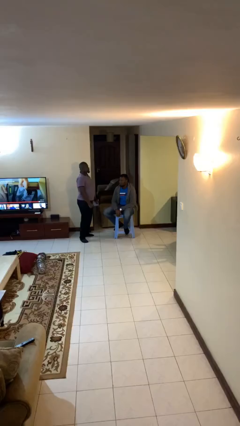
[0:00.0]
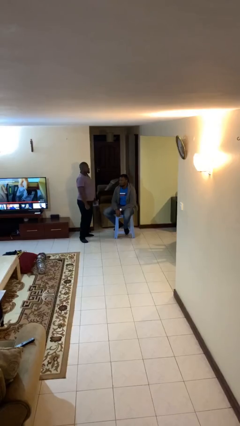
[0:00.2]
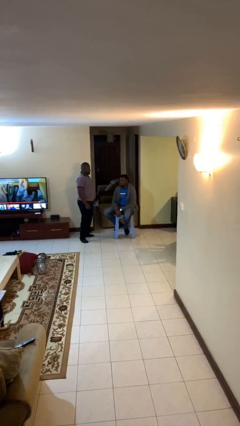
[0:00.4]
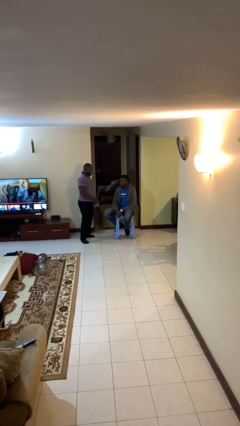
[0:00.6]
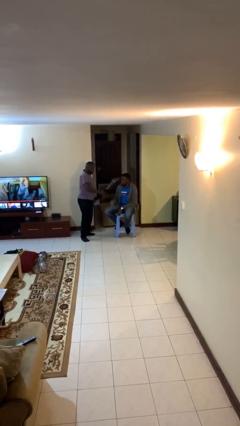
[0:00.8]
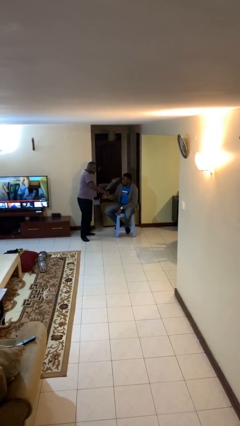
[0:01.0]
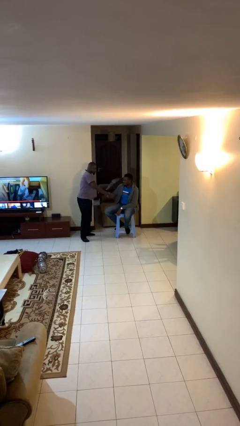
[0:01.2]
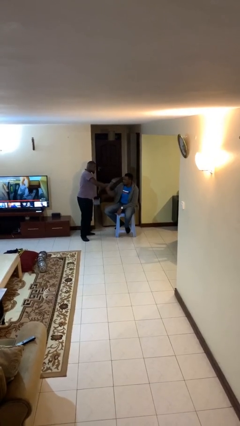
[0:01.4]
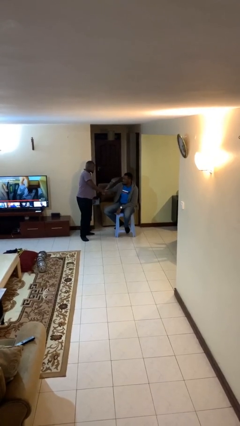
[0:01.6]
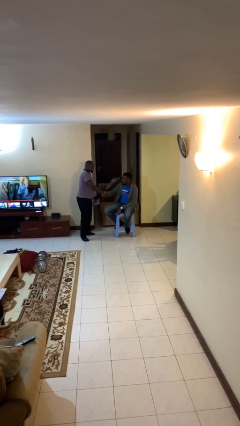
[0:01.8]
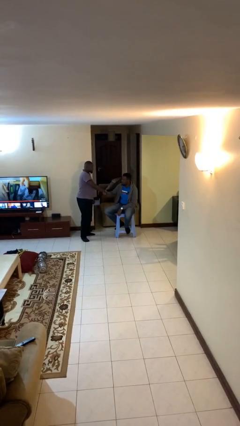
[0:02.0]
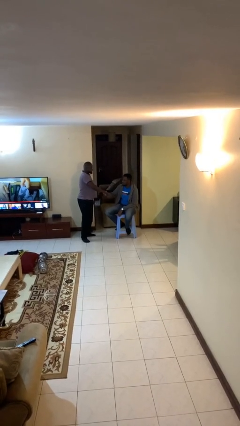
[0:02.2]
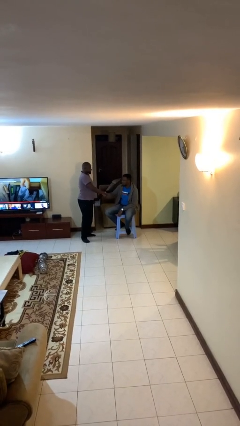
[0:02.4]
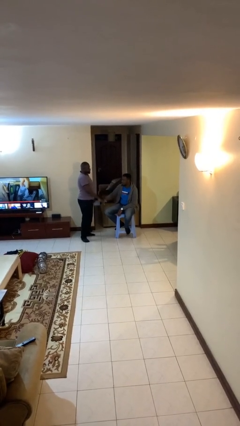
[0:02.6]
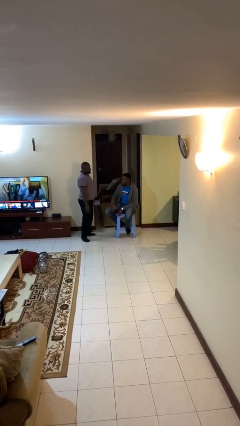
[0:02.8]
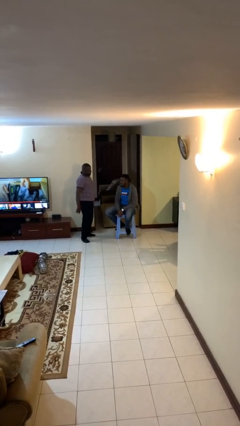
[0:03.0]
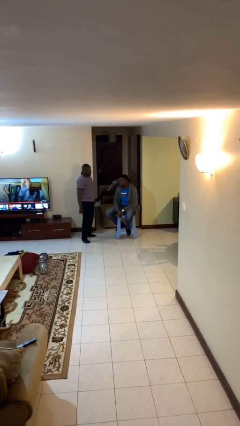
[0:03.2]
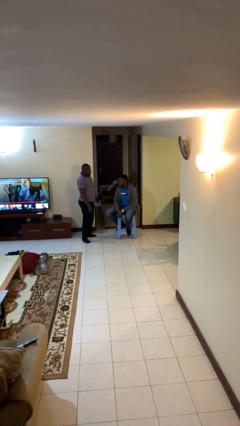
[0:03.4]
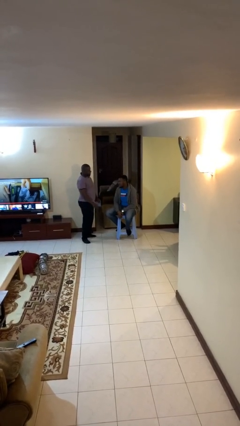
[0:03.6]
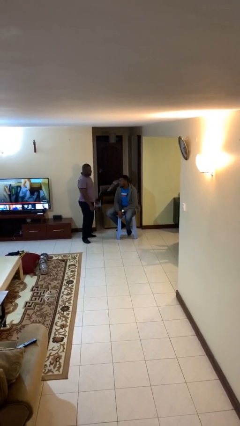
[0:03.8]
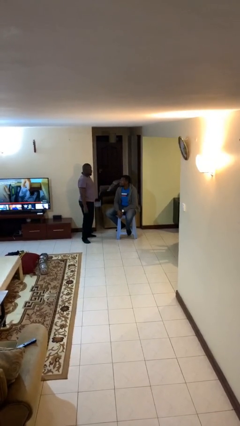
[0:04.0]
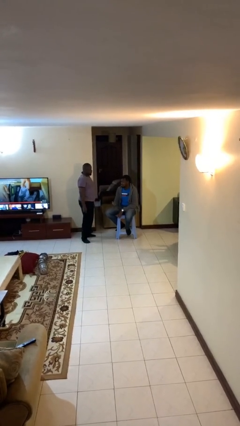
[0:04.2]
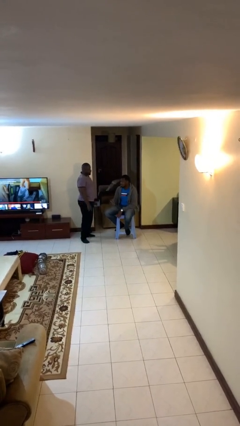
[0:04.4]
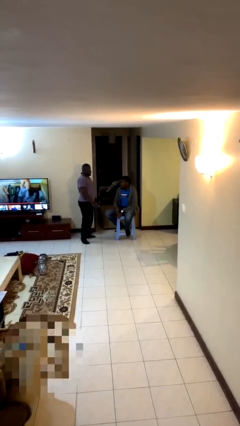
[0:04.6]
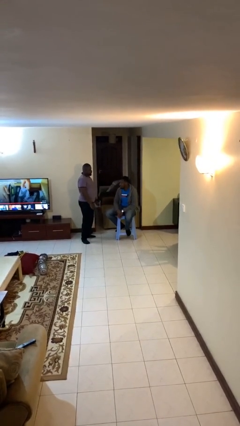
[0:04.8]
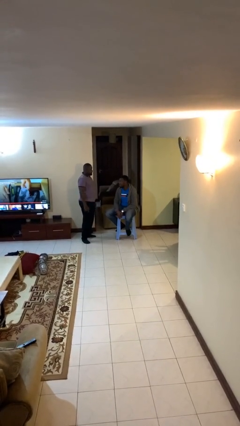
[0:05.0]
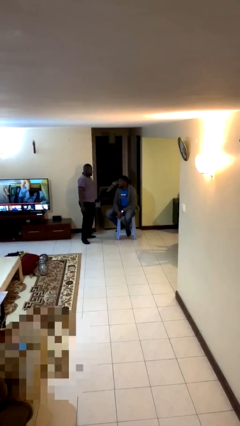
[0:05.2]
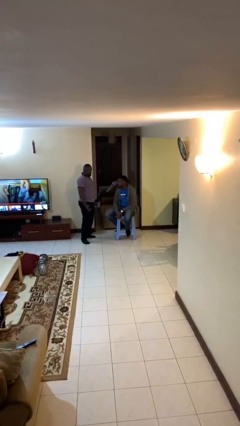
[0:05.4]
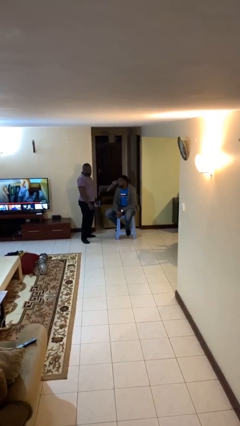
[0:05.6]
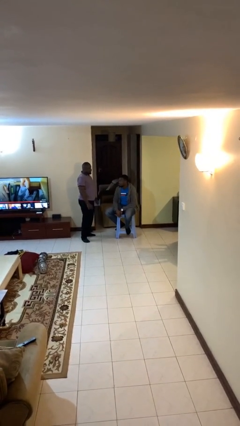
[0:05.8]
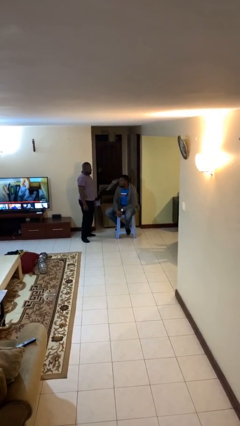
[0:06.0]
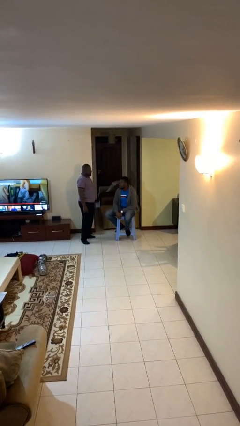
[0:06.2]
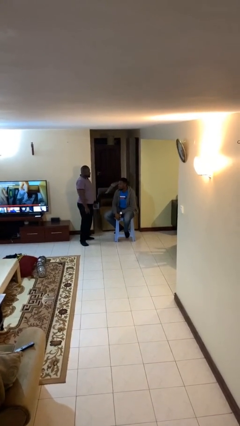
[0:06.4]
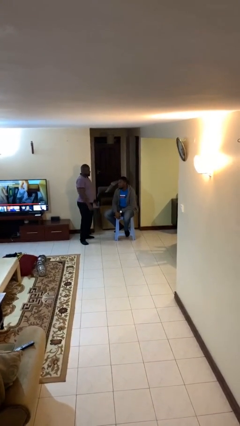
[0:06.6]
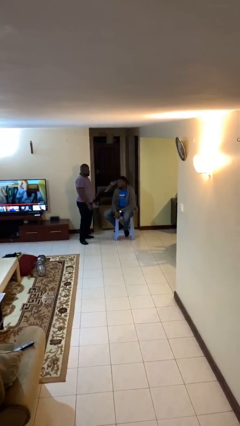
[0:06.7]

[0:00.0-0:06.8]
person shakes hand

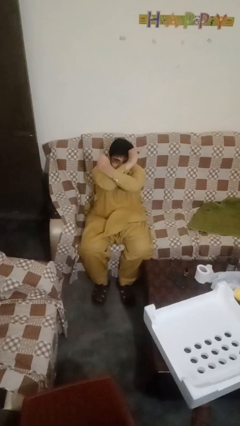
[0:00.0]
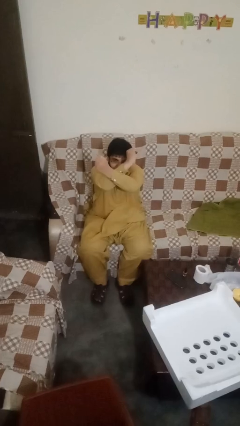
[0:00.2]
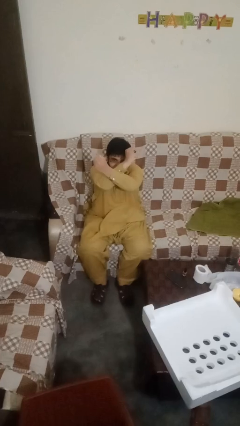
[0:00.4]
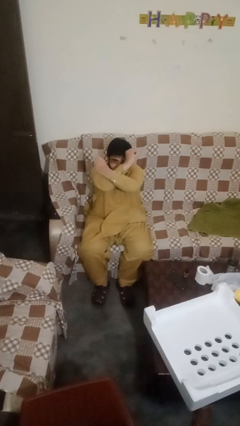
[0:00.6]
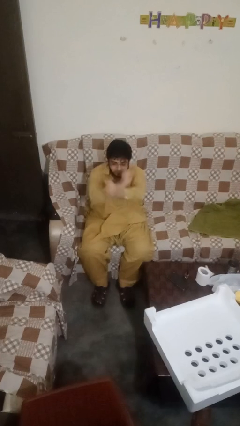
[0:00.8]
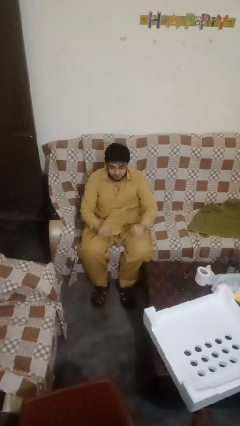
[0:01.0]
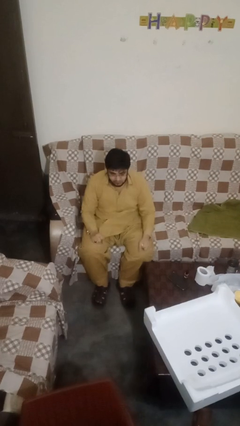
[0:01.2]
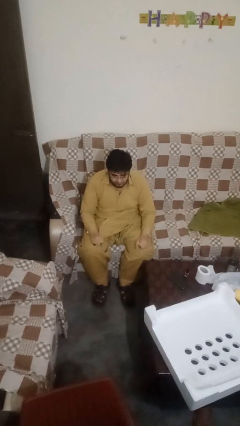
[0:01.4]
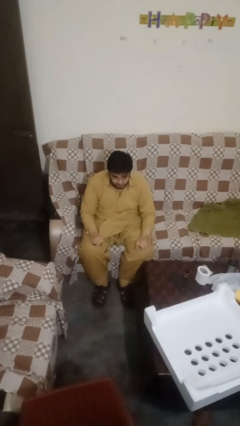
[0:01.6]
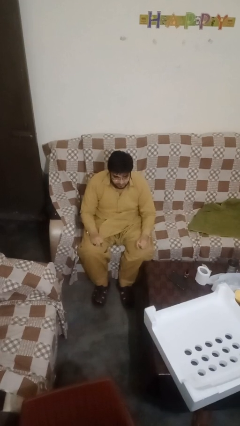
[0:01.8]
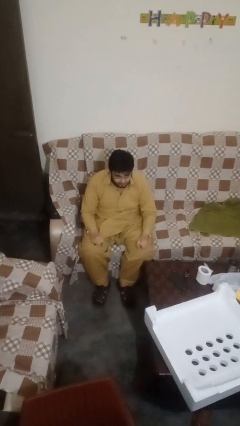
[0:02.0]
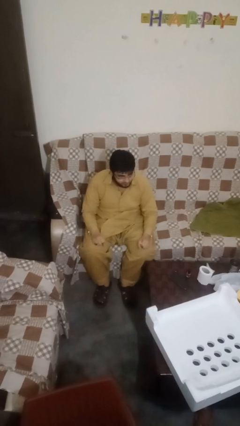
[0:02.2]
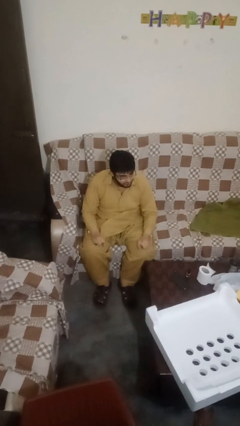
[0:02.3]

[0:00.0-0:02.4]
person gestures arms x

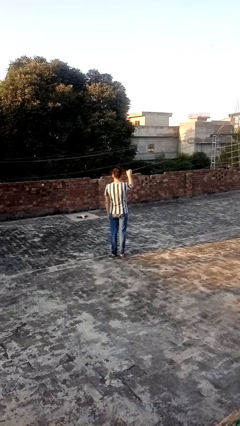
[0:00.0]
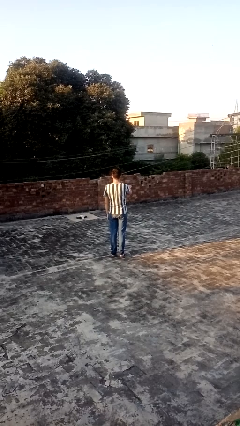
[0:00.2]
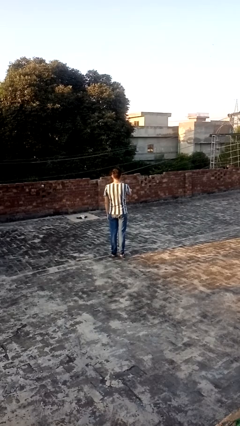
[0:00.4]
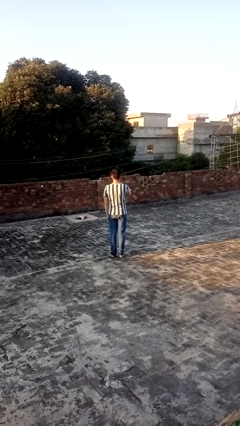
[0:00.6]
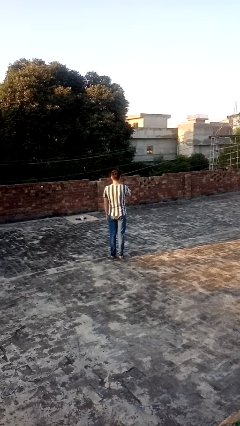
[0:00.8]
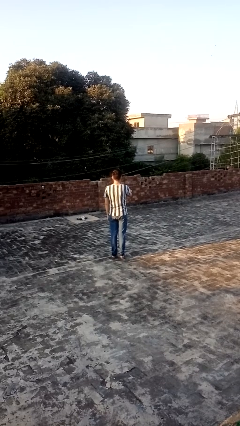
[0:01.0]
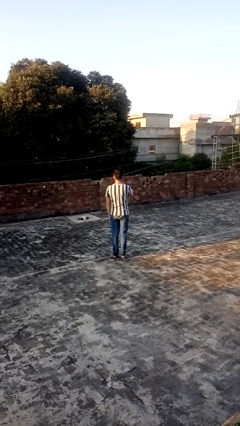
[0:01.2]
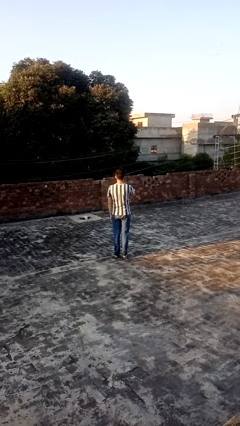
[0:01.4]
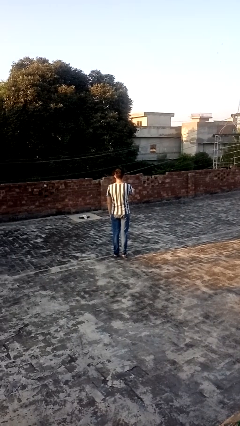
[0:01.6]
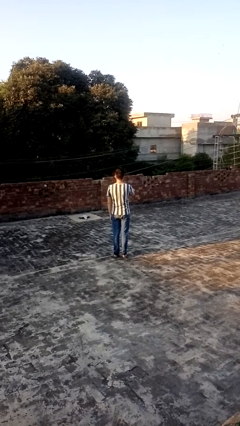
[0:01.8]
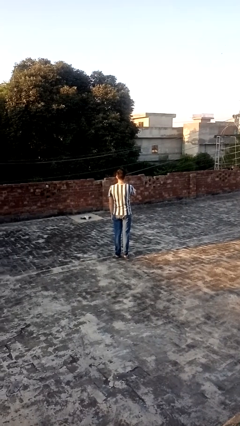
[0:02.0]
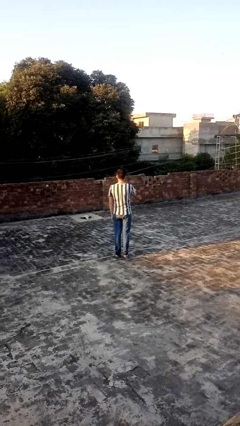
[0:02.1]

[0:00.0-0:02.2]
person gestures swipe down

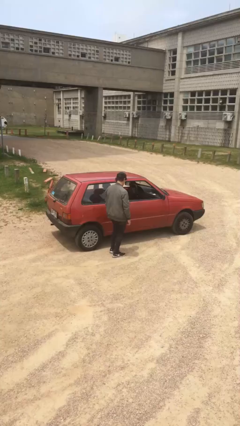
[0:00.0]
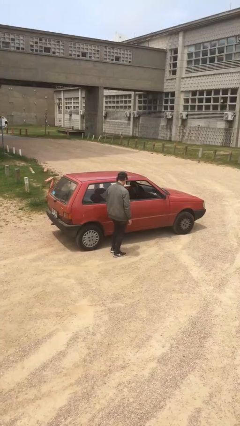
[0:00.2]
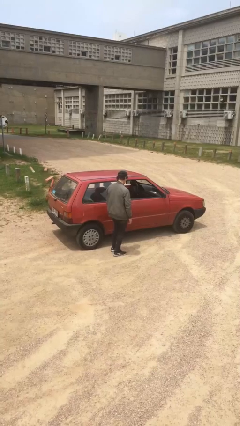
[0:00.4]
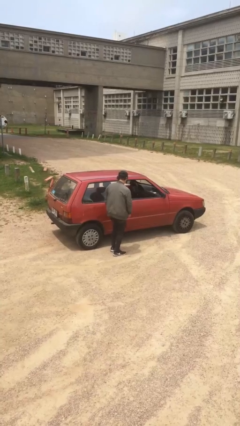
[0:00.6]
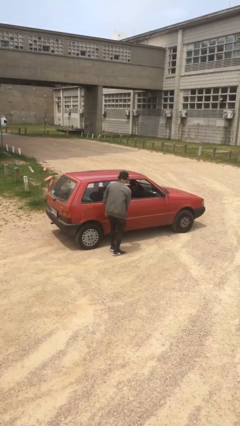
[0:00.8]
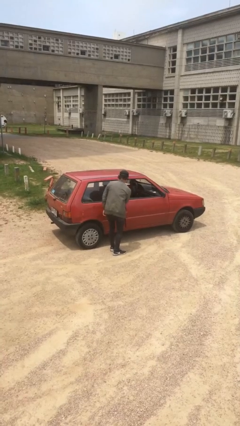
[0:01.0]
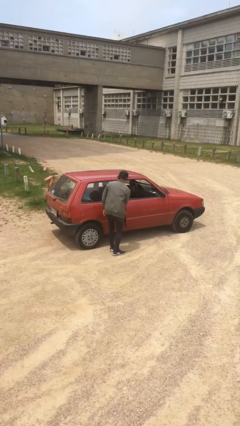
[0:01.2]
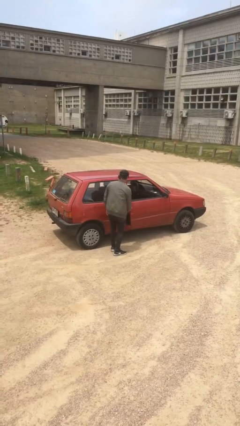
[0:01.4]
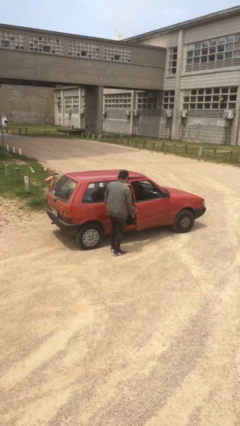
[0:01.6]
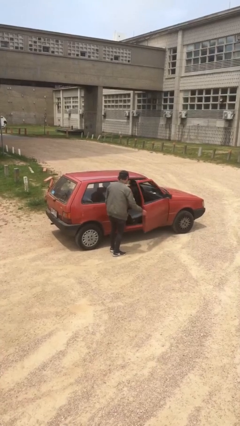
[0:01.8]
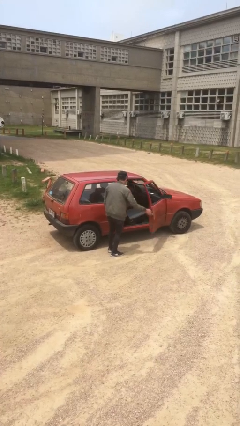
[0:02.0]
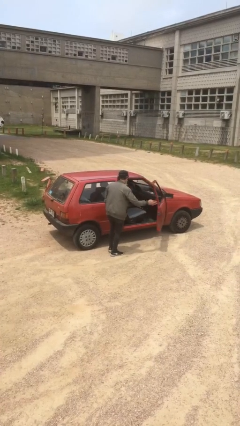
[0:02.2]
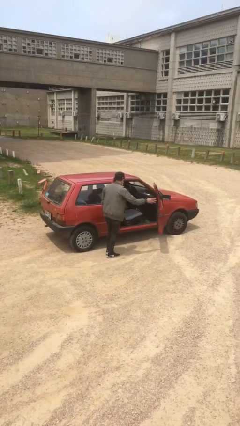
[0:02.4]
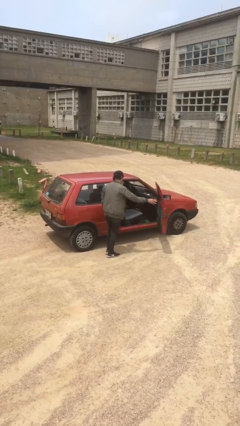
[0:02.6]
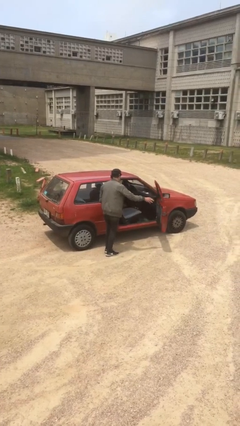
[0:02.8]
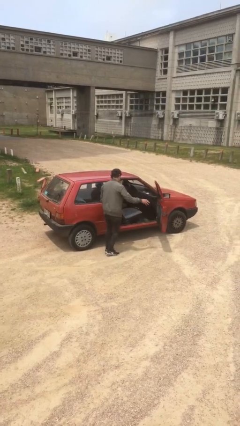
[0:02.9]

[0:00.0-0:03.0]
person opens car door

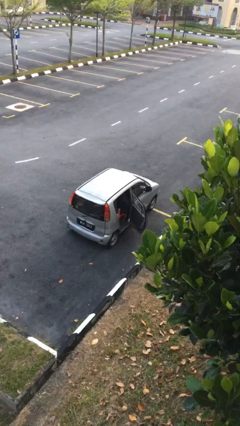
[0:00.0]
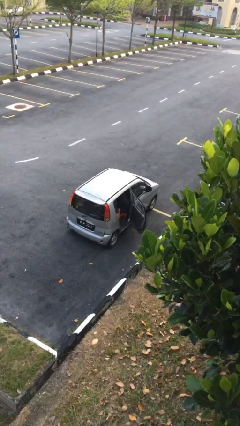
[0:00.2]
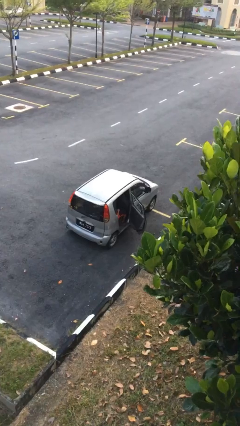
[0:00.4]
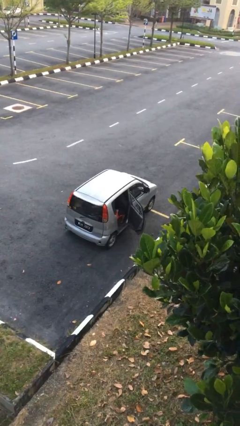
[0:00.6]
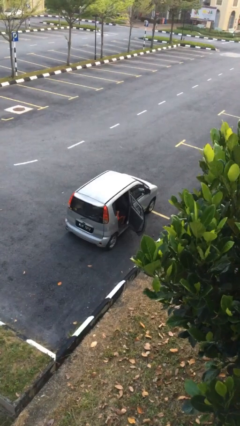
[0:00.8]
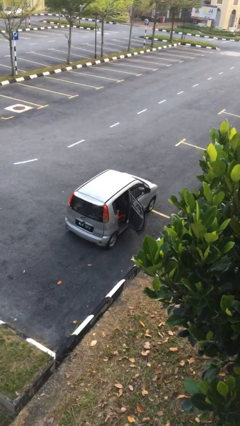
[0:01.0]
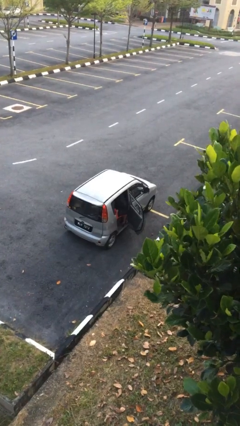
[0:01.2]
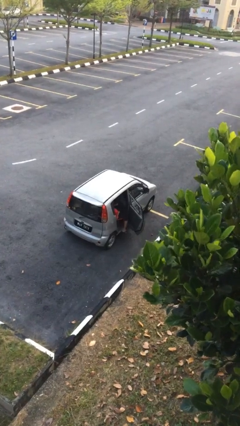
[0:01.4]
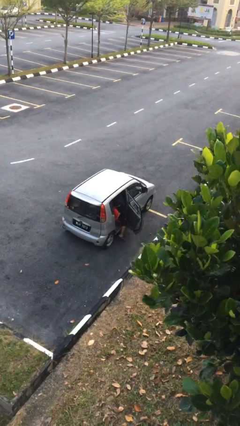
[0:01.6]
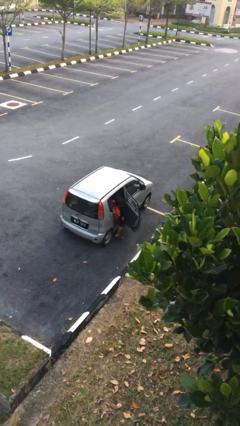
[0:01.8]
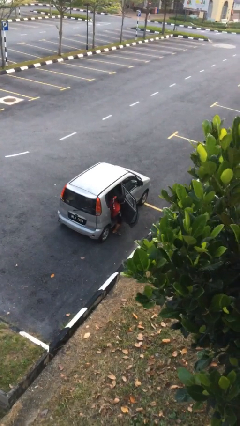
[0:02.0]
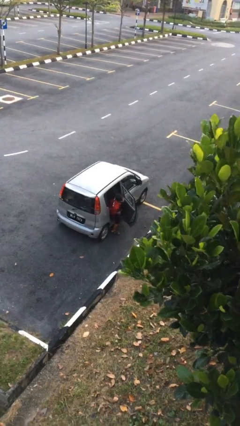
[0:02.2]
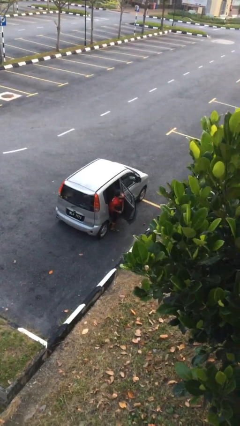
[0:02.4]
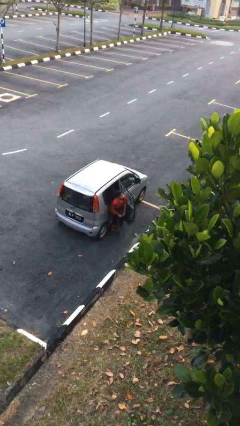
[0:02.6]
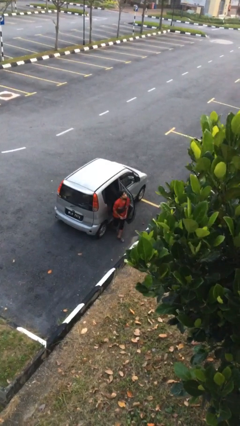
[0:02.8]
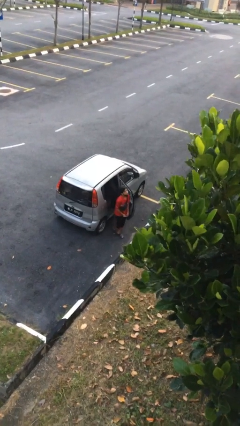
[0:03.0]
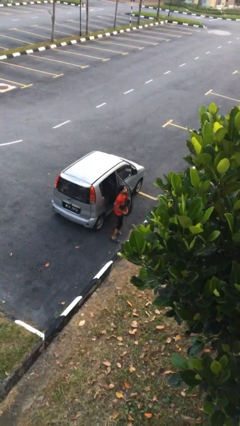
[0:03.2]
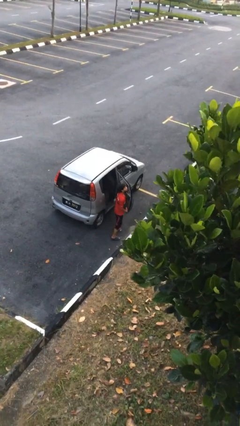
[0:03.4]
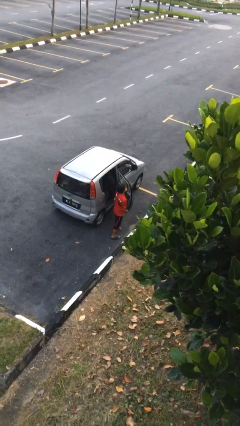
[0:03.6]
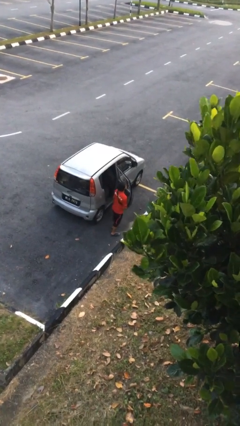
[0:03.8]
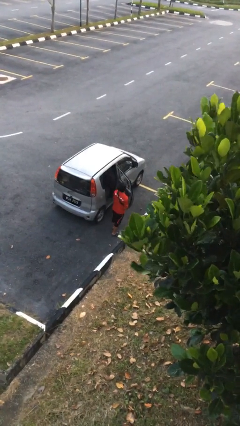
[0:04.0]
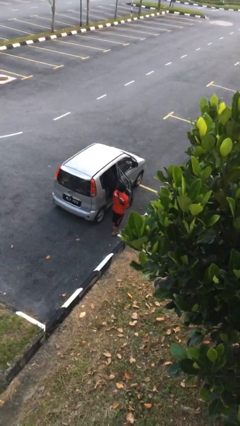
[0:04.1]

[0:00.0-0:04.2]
person exits car
